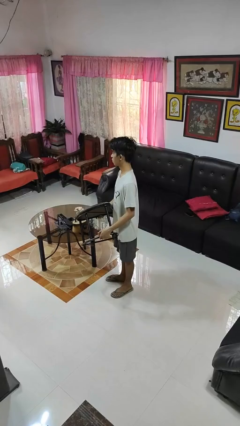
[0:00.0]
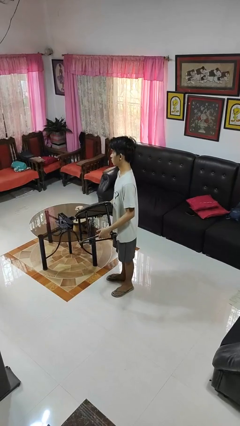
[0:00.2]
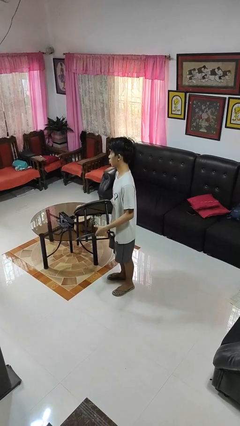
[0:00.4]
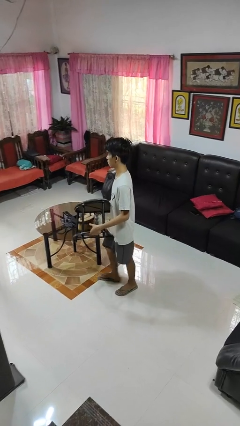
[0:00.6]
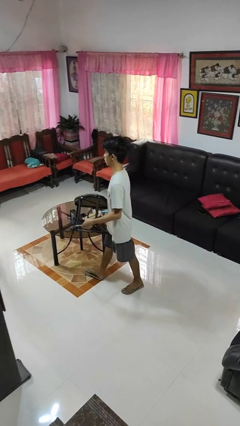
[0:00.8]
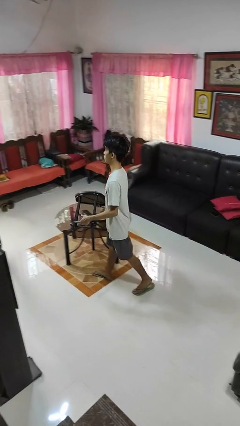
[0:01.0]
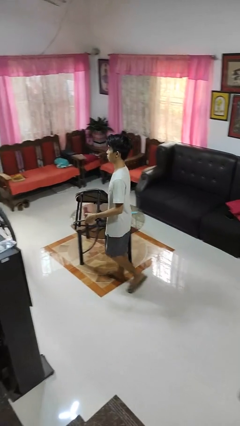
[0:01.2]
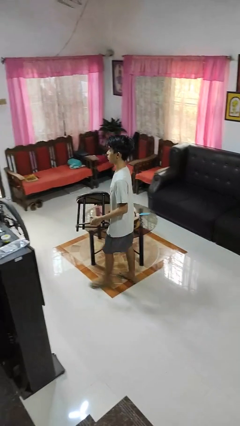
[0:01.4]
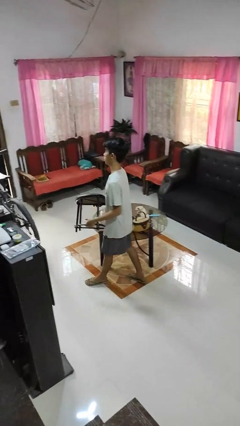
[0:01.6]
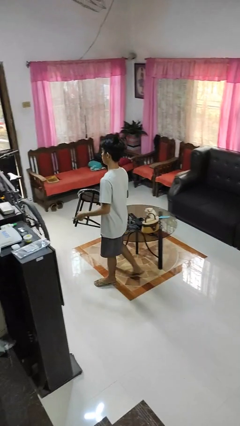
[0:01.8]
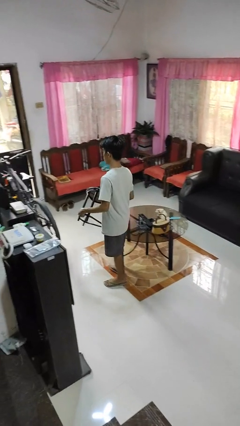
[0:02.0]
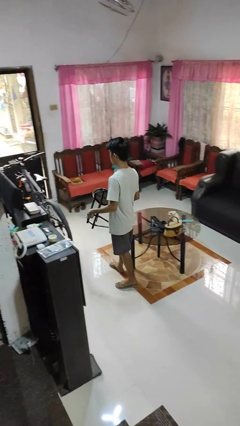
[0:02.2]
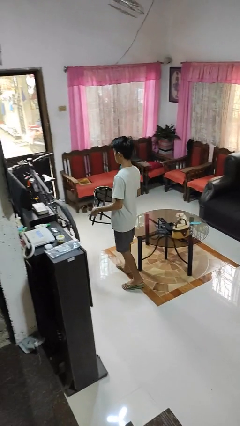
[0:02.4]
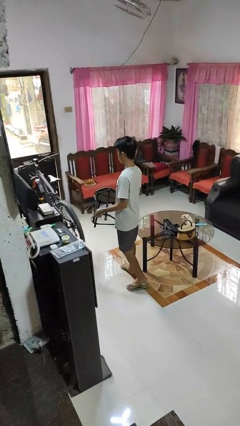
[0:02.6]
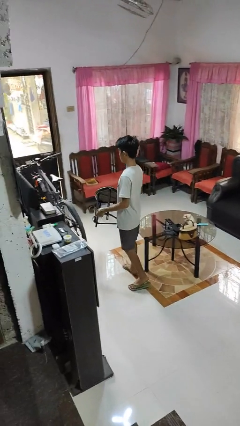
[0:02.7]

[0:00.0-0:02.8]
person carries furniture

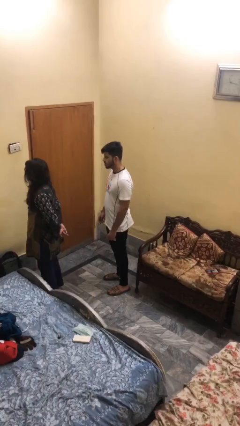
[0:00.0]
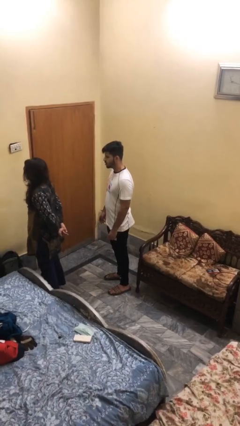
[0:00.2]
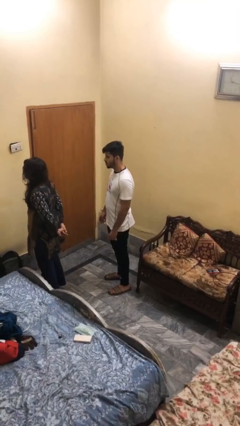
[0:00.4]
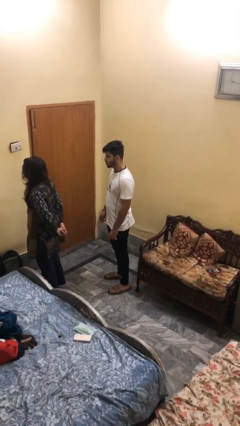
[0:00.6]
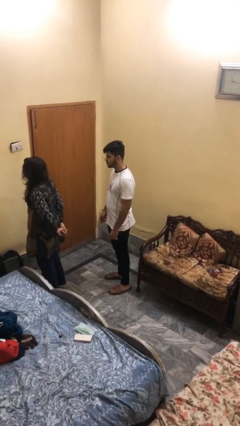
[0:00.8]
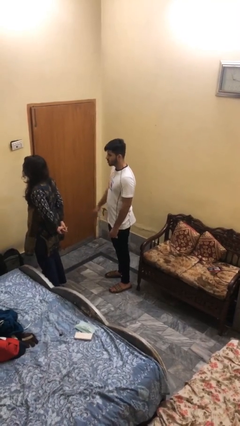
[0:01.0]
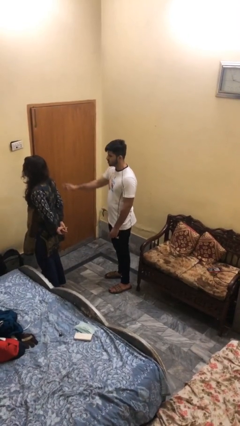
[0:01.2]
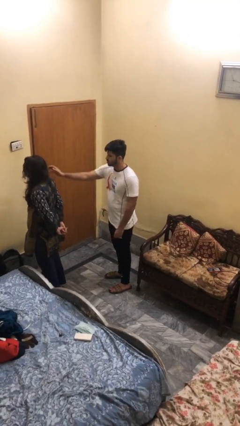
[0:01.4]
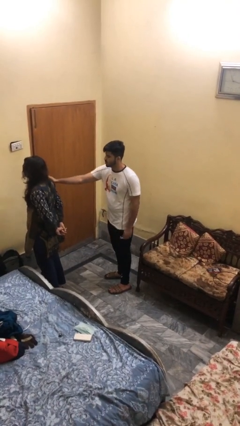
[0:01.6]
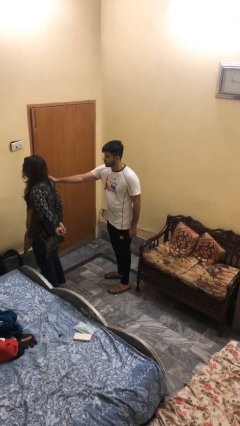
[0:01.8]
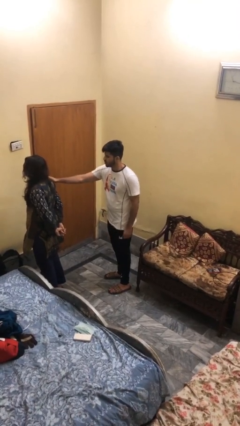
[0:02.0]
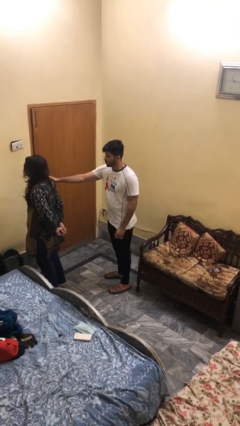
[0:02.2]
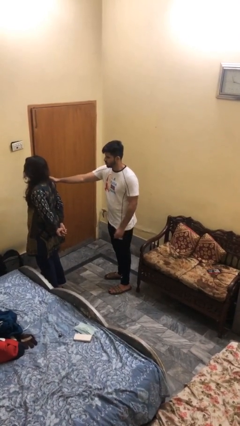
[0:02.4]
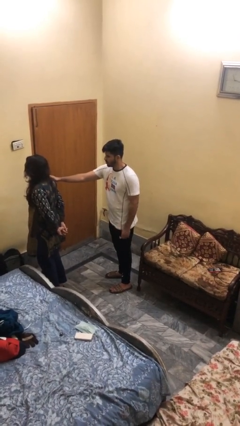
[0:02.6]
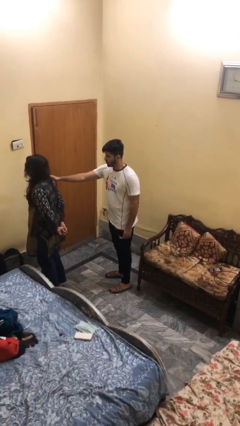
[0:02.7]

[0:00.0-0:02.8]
person grabs person by shoulder

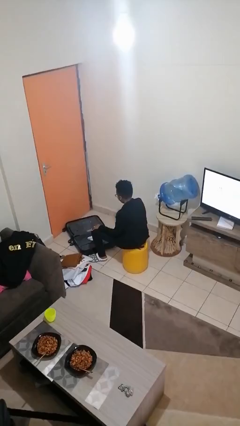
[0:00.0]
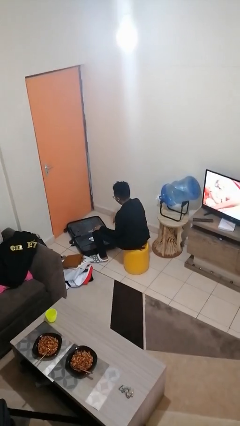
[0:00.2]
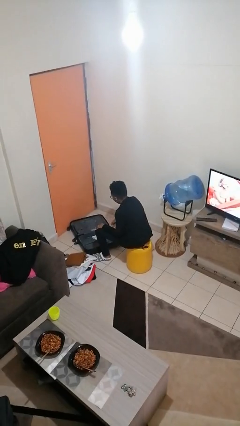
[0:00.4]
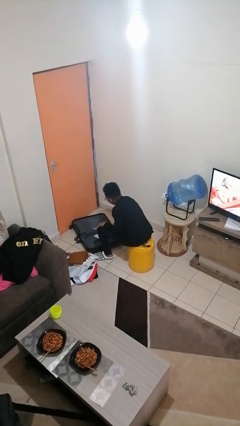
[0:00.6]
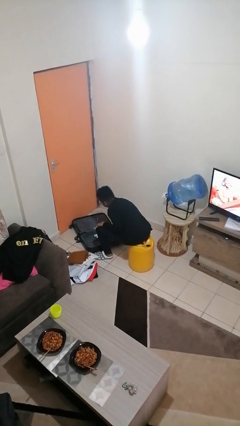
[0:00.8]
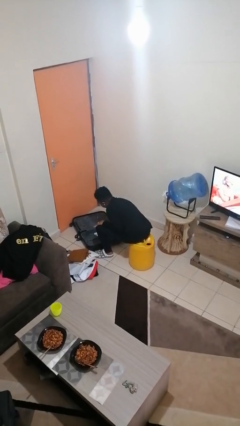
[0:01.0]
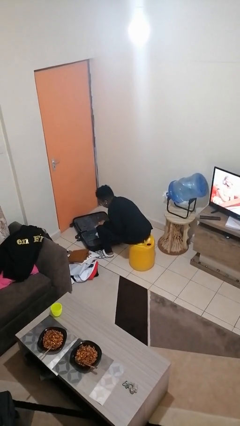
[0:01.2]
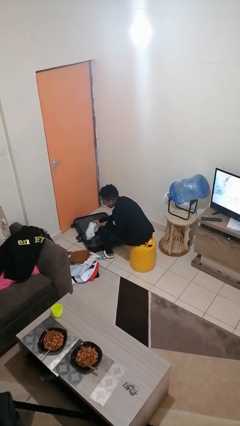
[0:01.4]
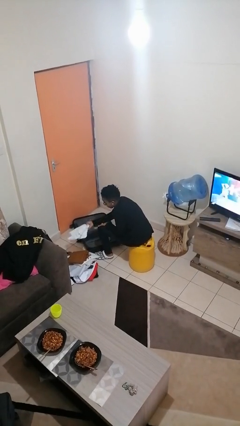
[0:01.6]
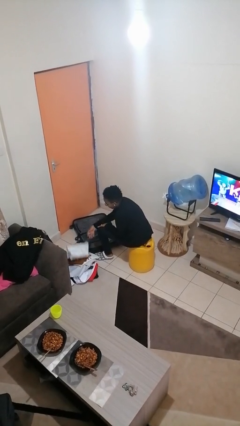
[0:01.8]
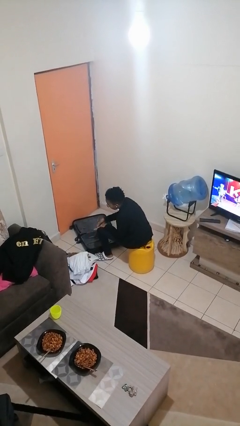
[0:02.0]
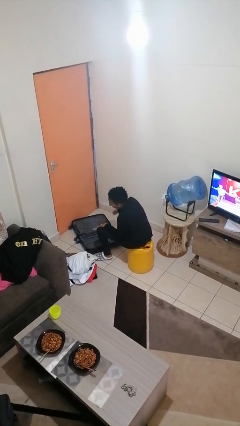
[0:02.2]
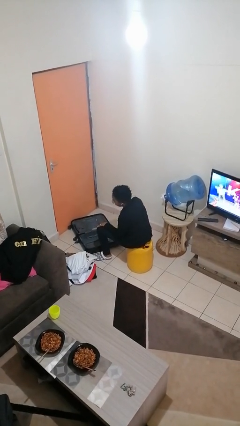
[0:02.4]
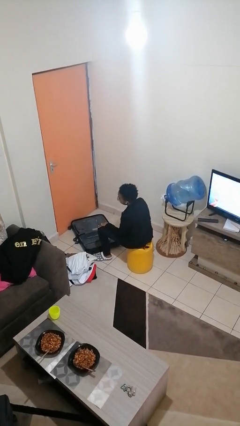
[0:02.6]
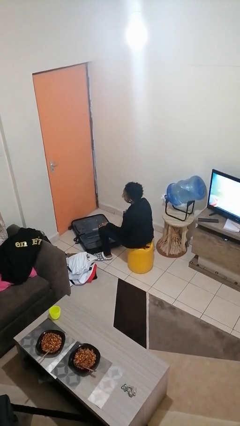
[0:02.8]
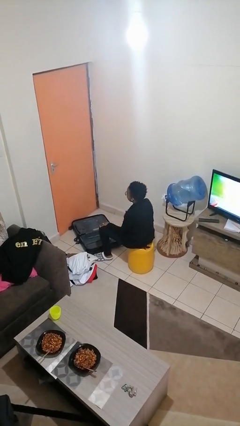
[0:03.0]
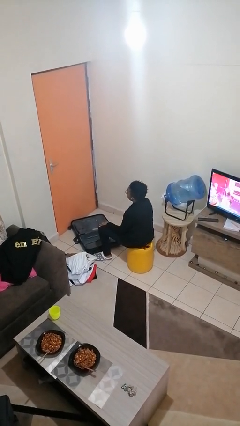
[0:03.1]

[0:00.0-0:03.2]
person unloads clothes from suitcase

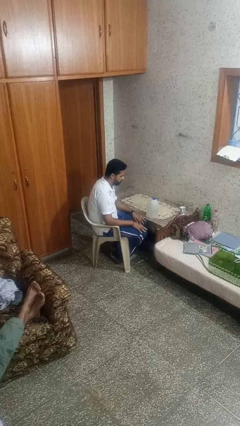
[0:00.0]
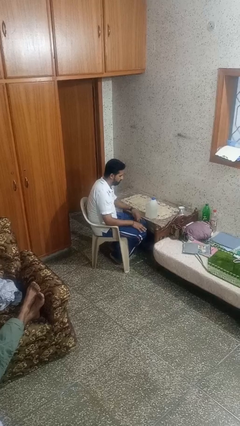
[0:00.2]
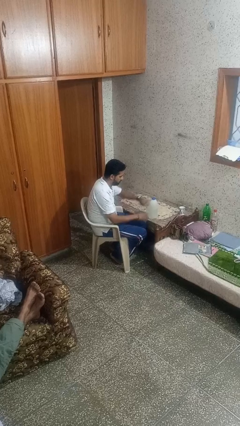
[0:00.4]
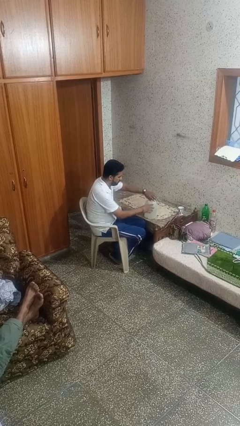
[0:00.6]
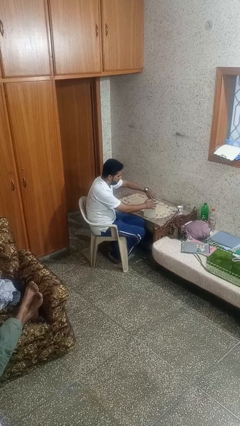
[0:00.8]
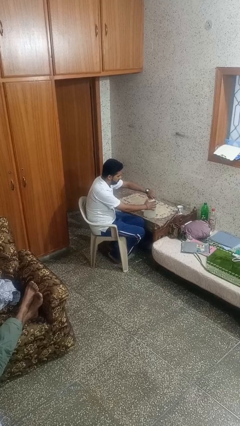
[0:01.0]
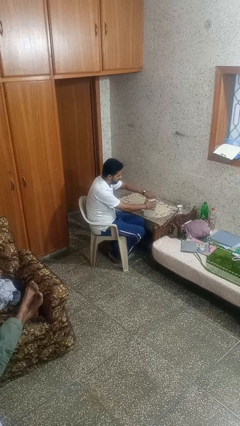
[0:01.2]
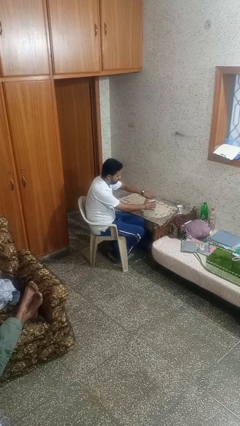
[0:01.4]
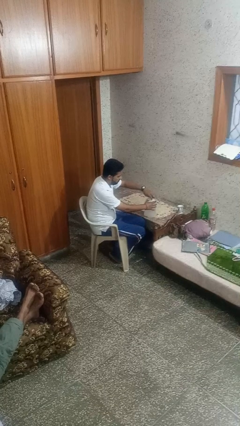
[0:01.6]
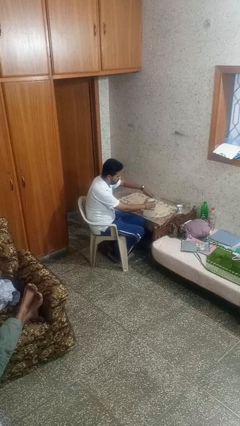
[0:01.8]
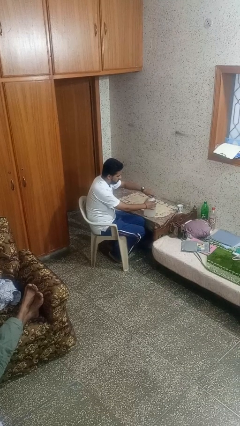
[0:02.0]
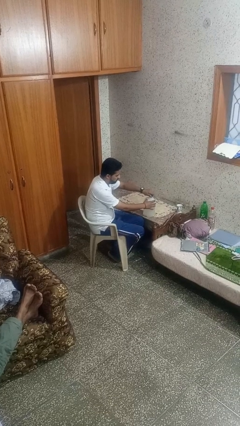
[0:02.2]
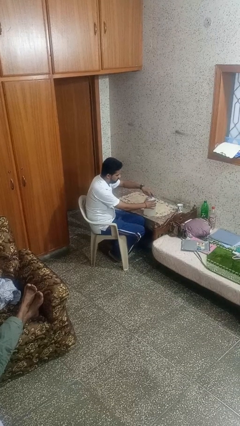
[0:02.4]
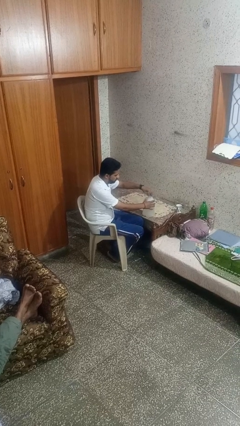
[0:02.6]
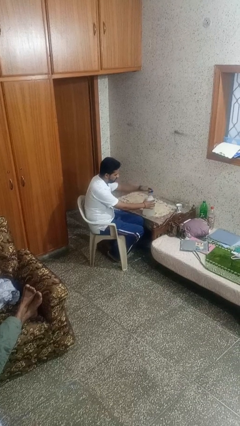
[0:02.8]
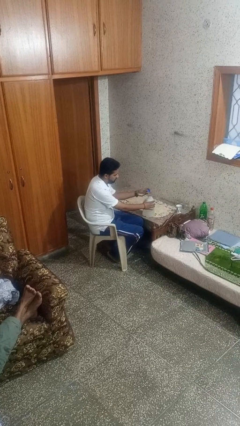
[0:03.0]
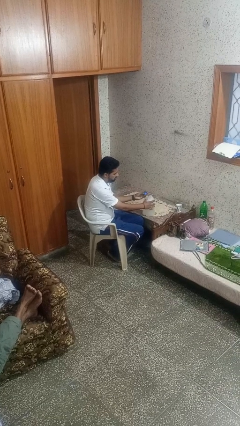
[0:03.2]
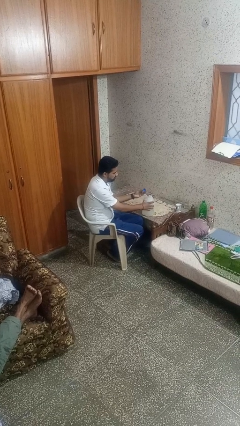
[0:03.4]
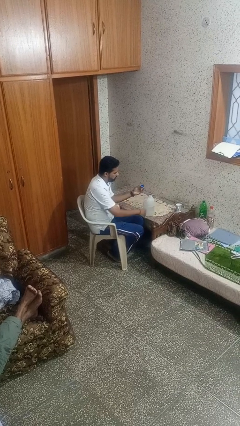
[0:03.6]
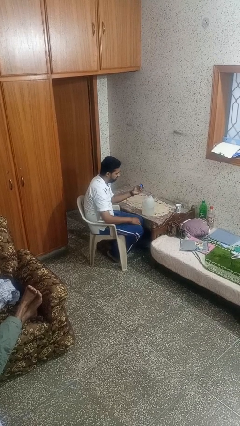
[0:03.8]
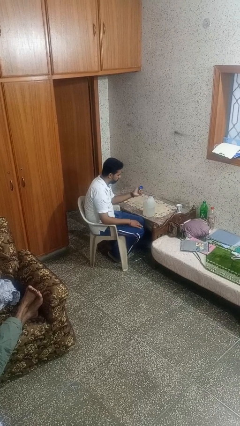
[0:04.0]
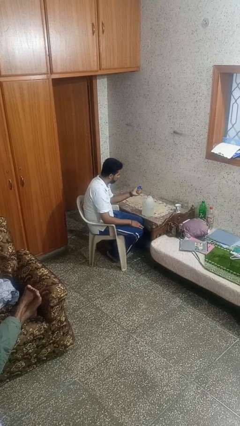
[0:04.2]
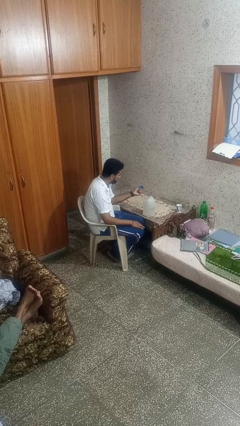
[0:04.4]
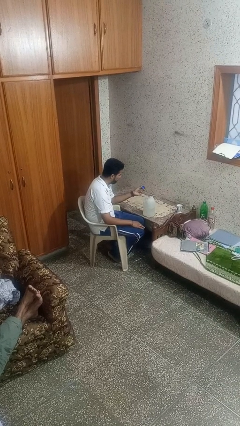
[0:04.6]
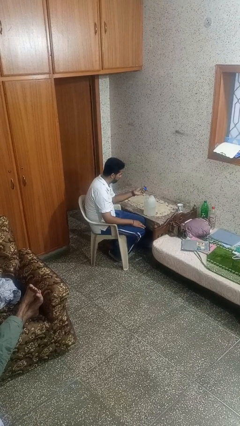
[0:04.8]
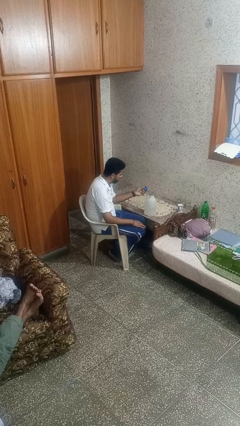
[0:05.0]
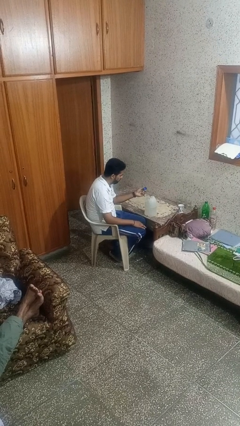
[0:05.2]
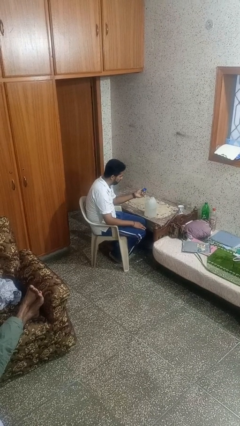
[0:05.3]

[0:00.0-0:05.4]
person unscrews lid from bottle

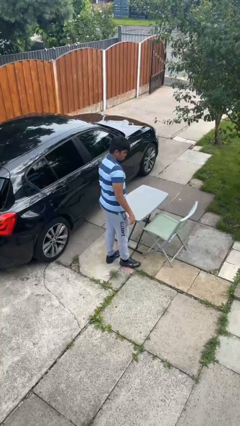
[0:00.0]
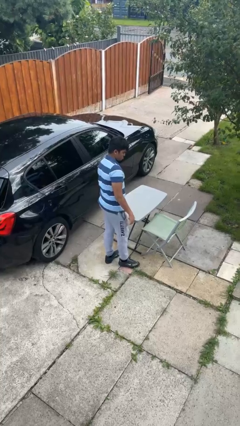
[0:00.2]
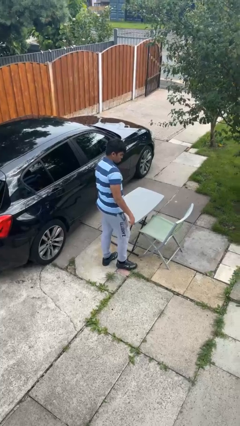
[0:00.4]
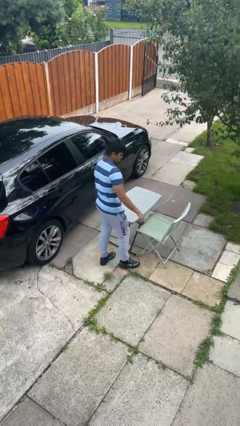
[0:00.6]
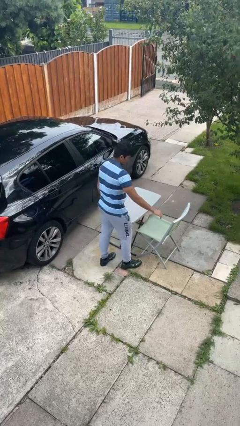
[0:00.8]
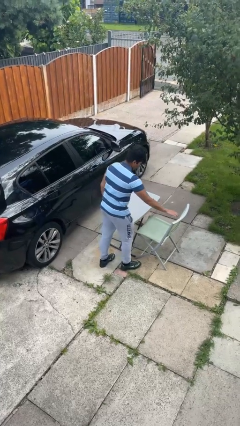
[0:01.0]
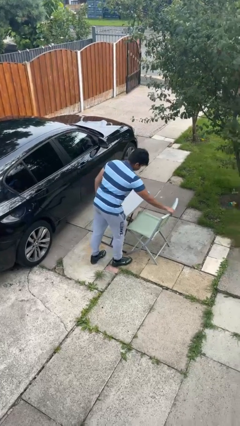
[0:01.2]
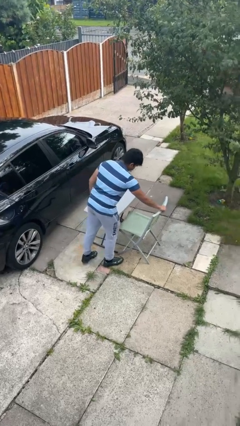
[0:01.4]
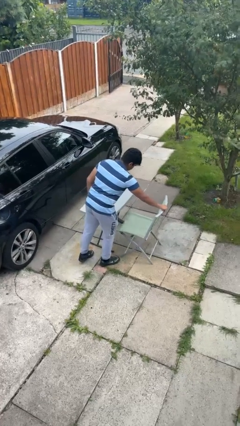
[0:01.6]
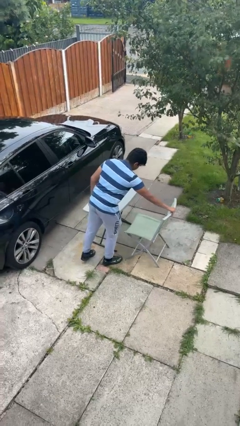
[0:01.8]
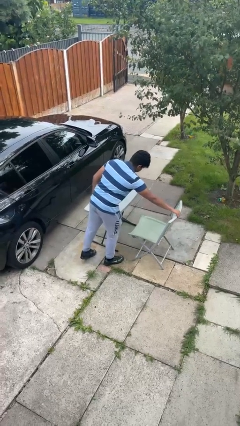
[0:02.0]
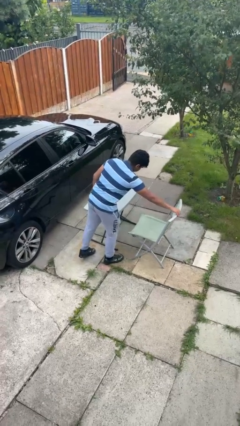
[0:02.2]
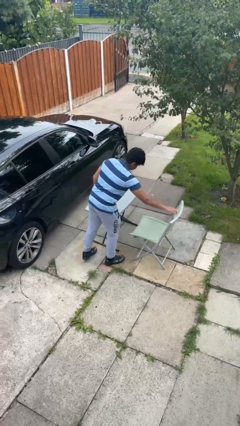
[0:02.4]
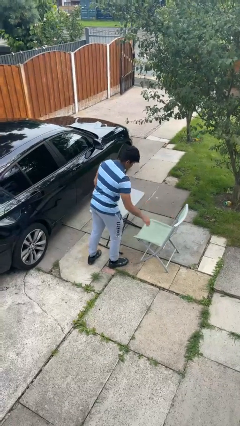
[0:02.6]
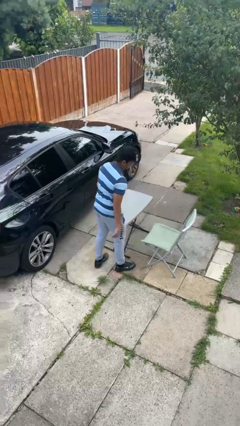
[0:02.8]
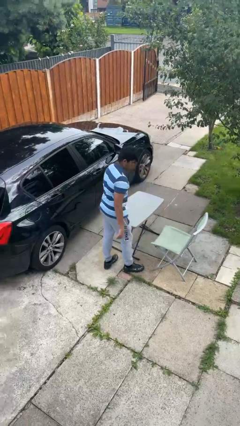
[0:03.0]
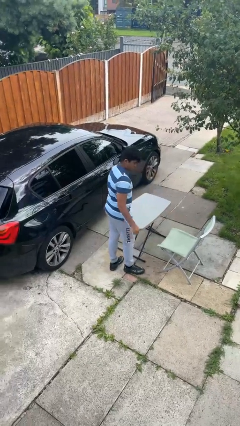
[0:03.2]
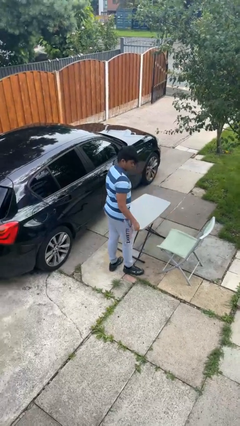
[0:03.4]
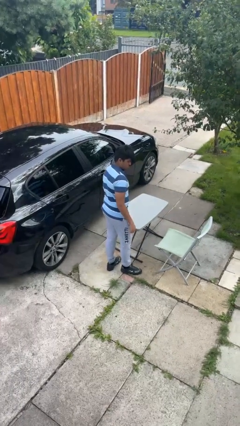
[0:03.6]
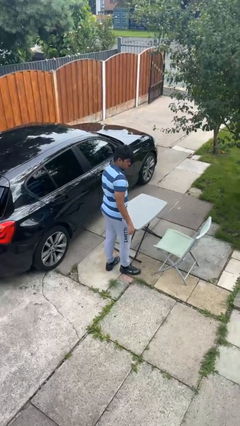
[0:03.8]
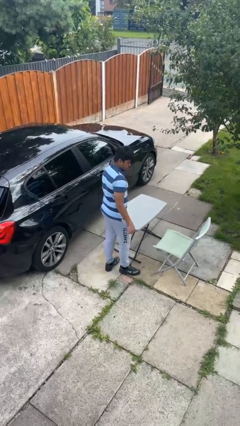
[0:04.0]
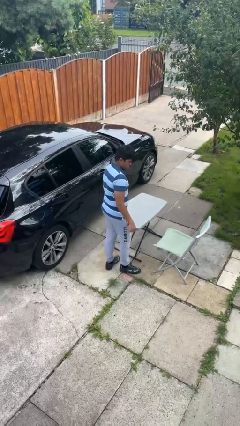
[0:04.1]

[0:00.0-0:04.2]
person pulls out chair
